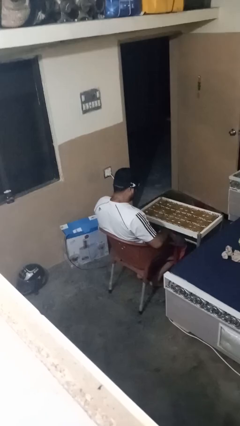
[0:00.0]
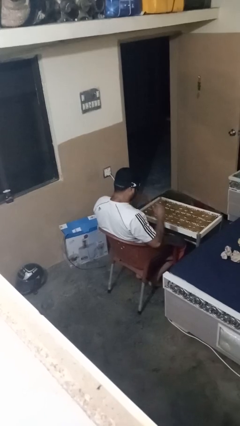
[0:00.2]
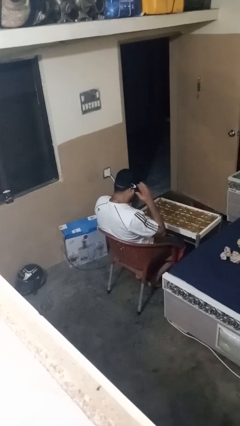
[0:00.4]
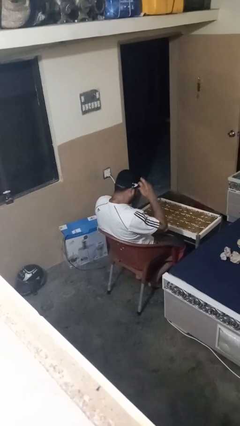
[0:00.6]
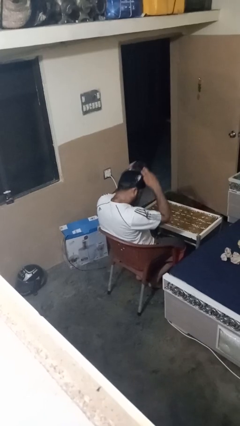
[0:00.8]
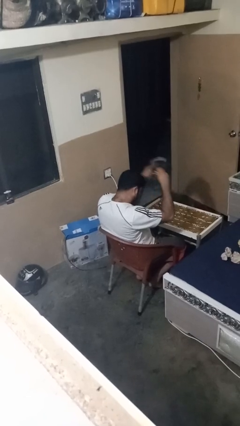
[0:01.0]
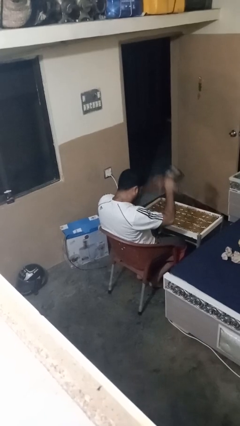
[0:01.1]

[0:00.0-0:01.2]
person takes off sunglasses

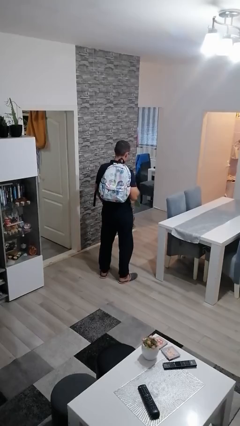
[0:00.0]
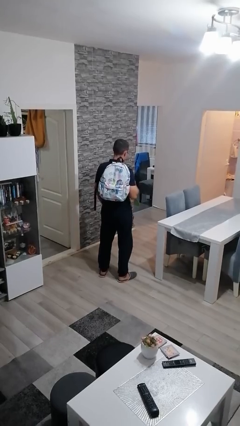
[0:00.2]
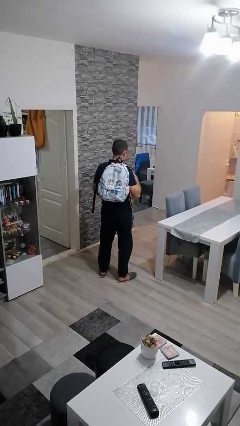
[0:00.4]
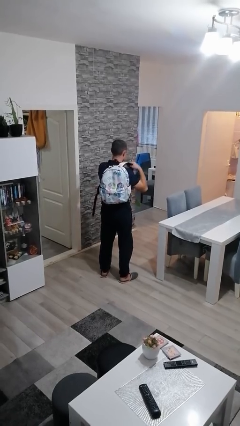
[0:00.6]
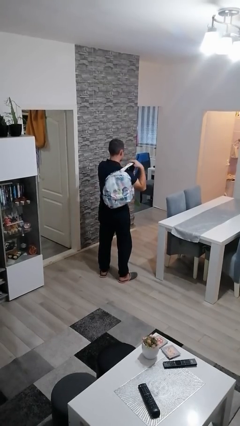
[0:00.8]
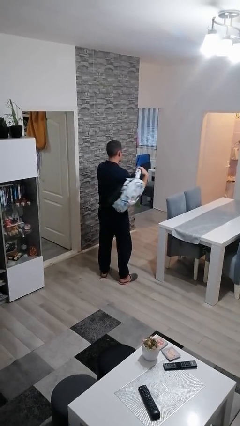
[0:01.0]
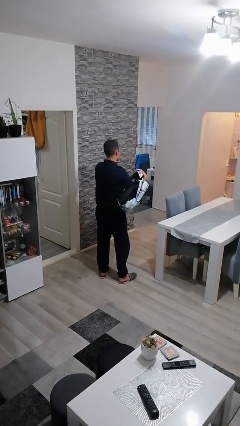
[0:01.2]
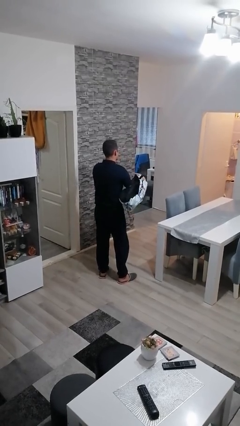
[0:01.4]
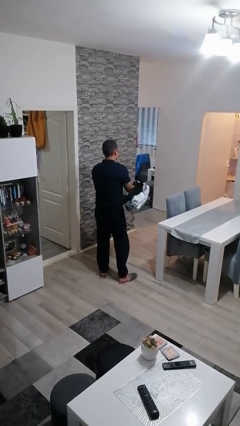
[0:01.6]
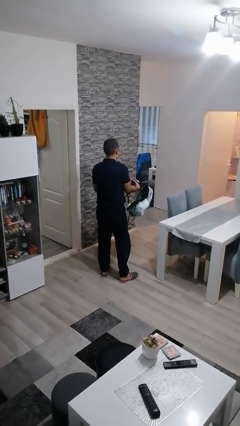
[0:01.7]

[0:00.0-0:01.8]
person takes off backpack

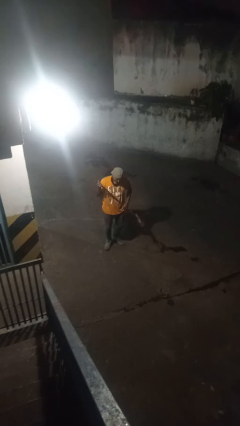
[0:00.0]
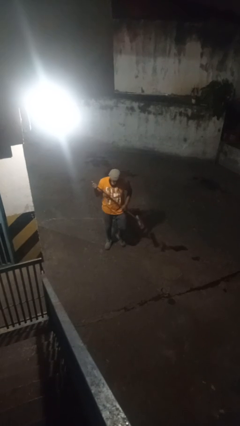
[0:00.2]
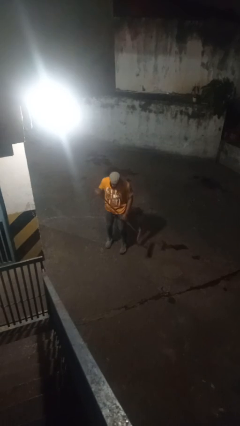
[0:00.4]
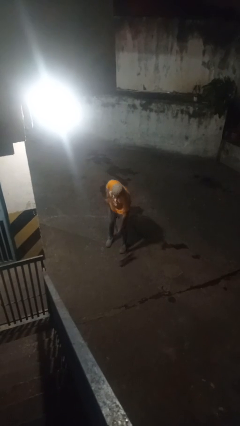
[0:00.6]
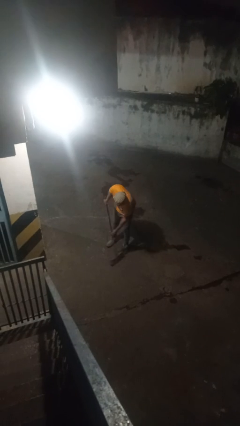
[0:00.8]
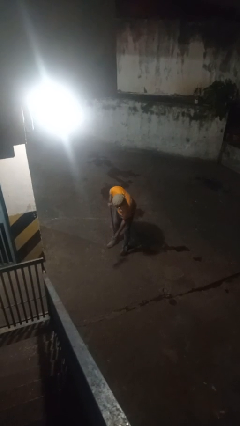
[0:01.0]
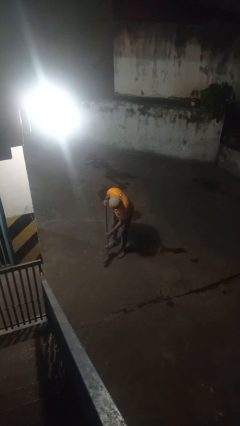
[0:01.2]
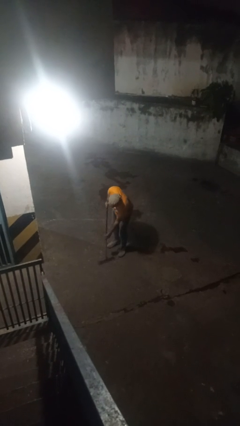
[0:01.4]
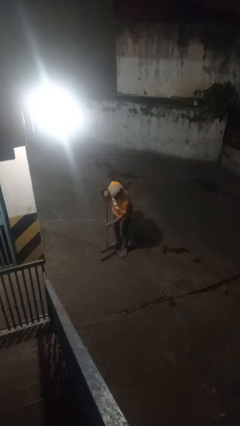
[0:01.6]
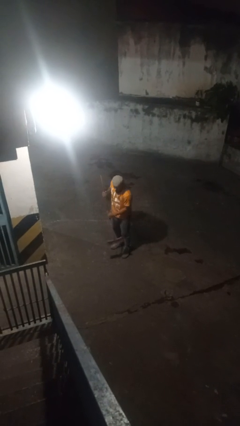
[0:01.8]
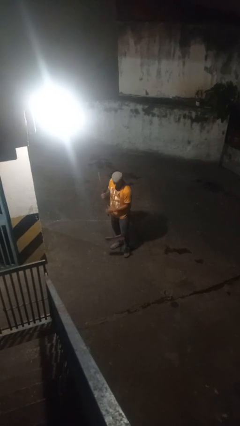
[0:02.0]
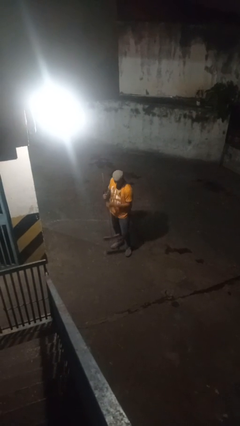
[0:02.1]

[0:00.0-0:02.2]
person sweeps floor

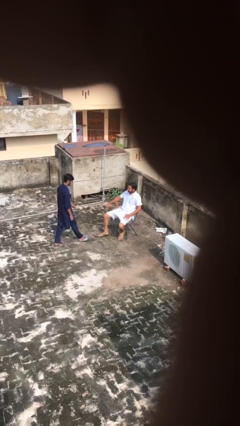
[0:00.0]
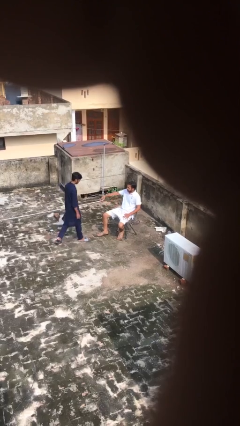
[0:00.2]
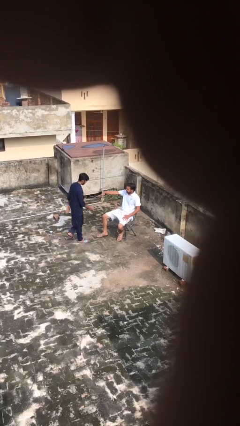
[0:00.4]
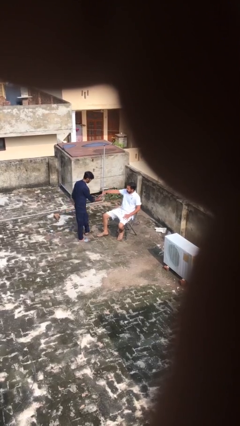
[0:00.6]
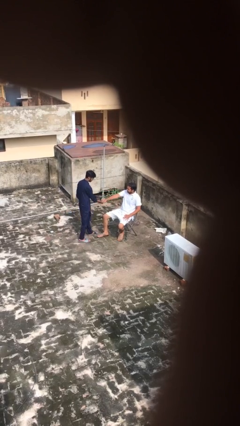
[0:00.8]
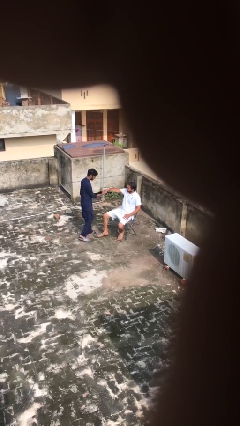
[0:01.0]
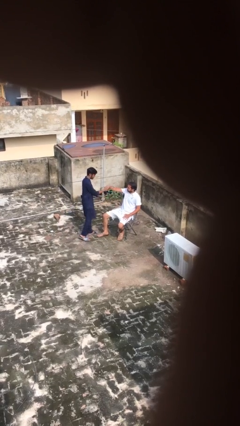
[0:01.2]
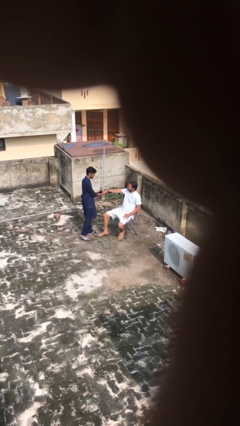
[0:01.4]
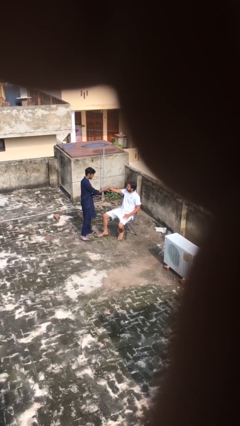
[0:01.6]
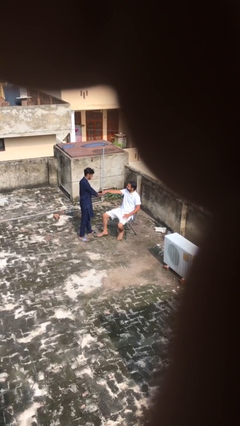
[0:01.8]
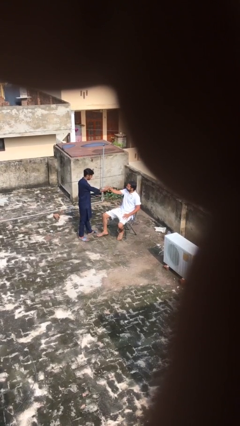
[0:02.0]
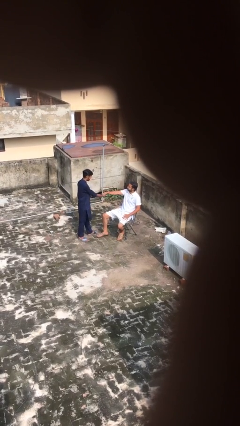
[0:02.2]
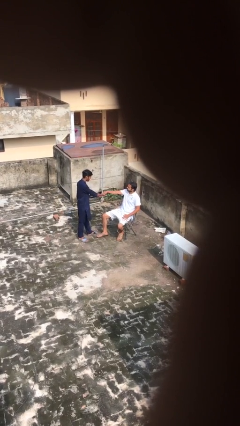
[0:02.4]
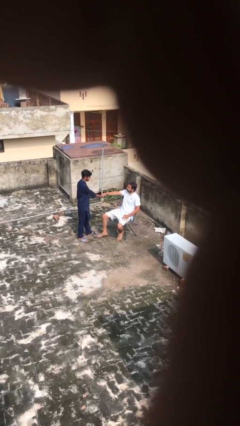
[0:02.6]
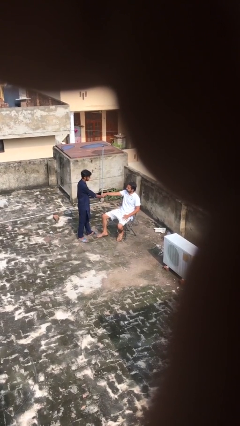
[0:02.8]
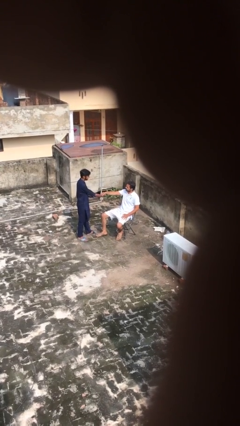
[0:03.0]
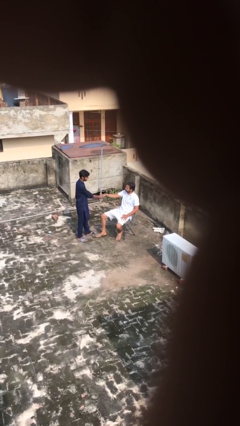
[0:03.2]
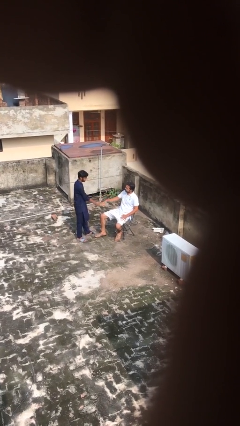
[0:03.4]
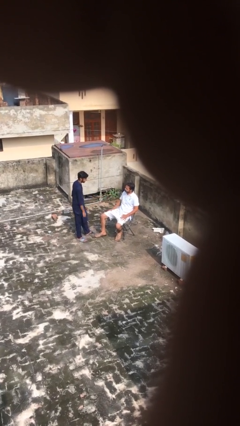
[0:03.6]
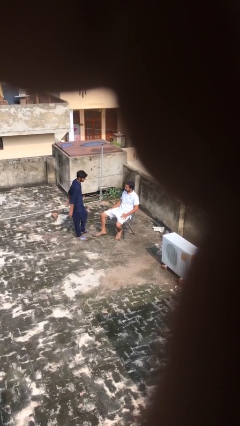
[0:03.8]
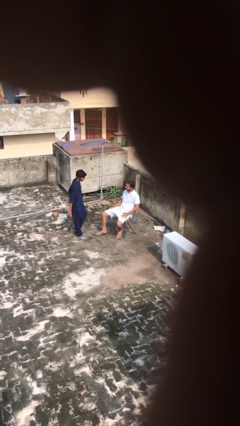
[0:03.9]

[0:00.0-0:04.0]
person shakes hand

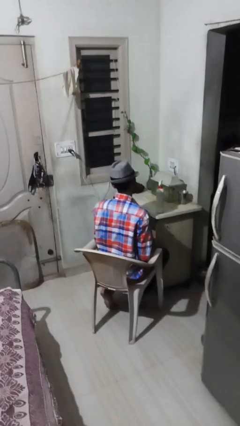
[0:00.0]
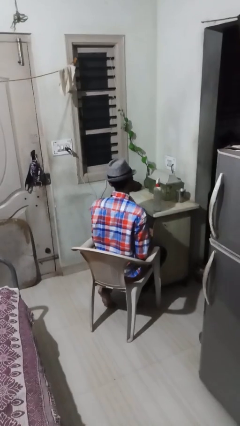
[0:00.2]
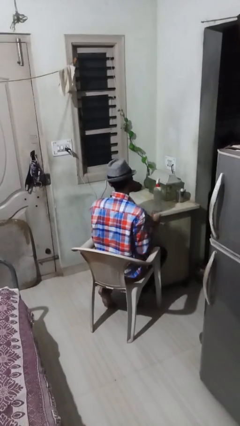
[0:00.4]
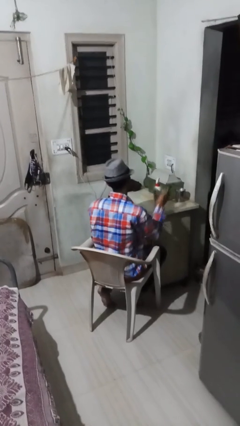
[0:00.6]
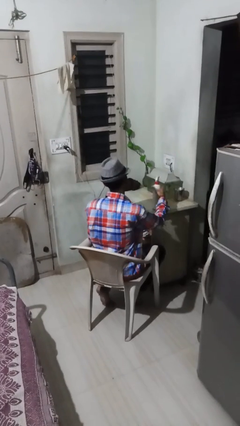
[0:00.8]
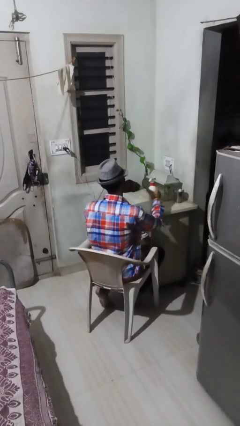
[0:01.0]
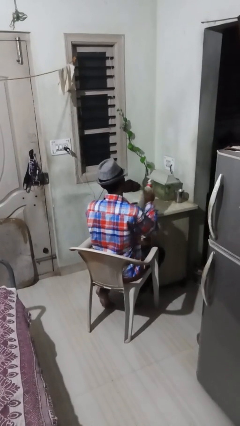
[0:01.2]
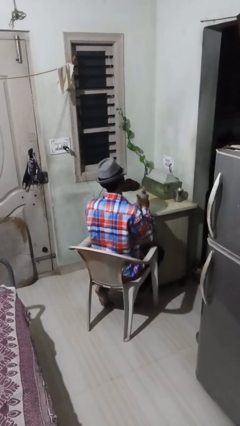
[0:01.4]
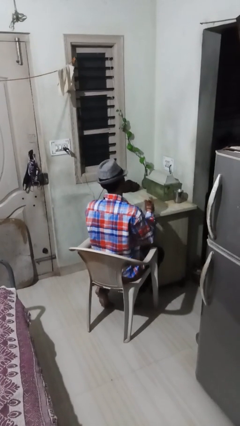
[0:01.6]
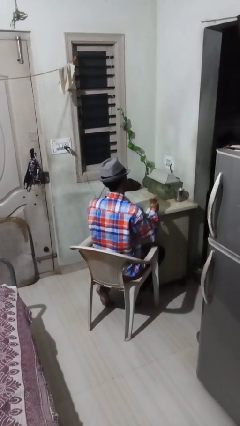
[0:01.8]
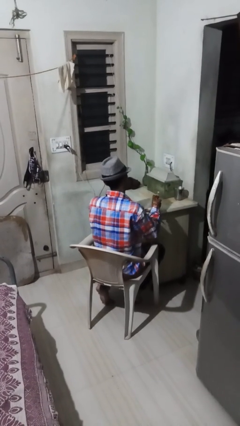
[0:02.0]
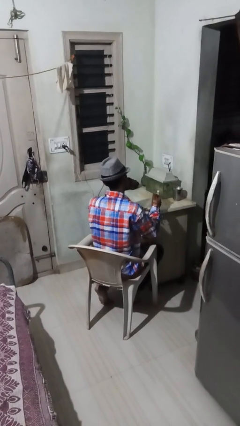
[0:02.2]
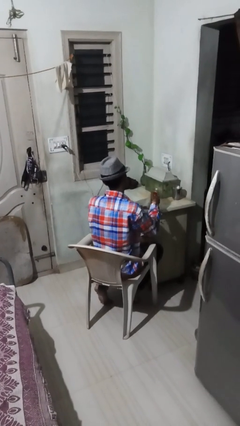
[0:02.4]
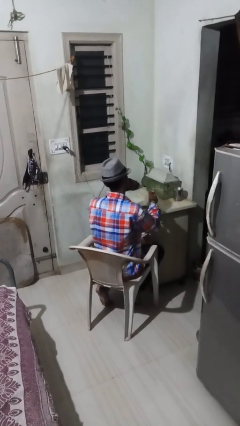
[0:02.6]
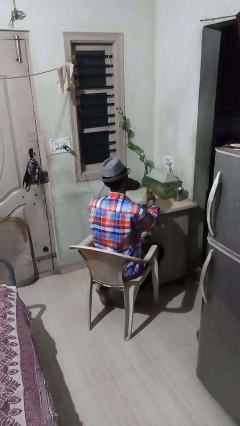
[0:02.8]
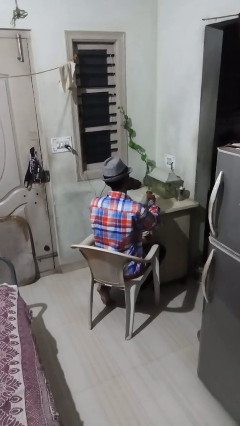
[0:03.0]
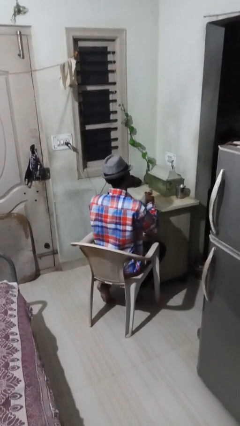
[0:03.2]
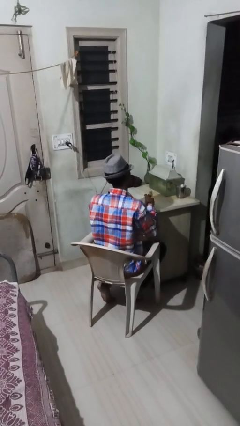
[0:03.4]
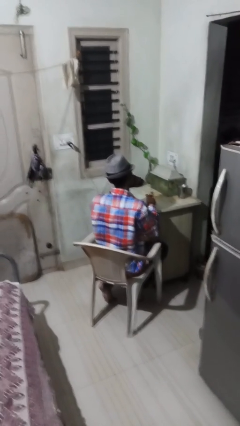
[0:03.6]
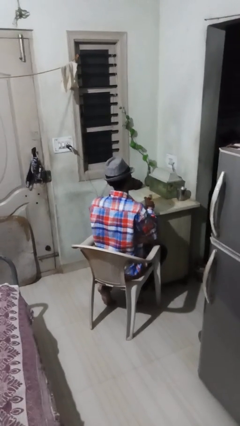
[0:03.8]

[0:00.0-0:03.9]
person sprays from bottle

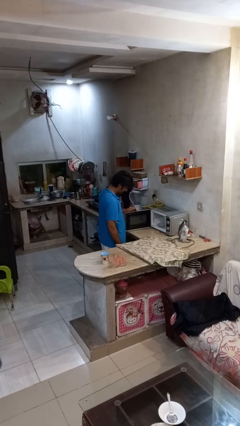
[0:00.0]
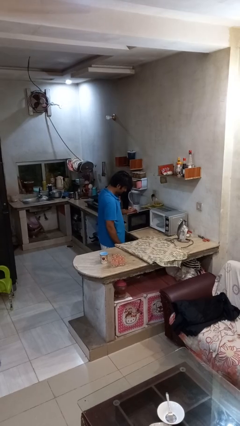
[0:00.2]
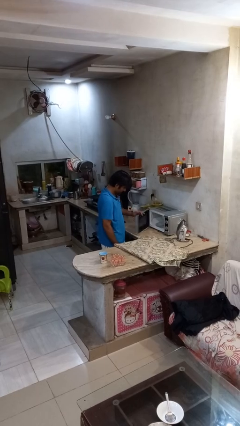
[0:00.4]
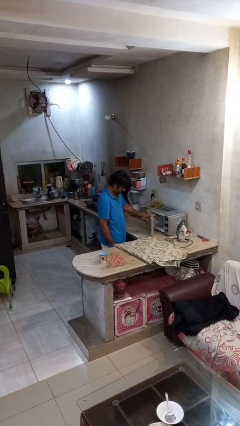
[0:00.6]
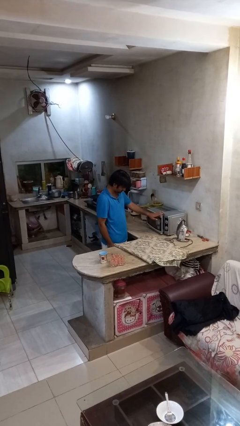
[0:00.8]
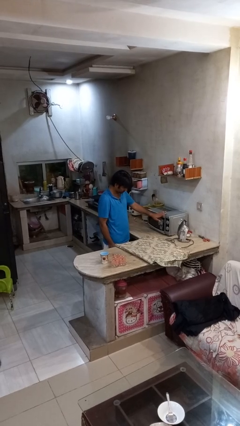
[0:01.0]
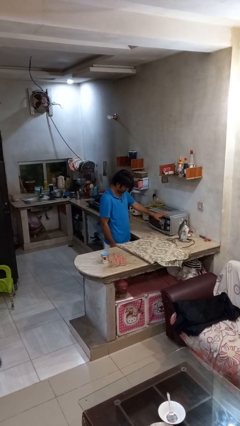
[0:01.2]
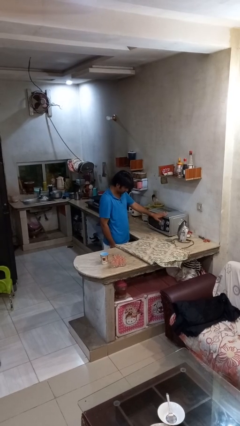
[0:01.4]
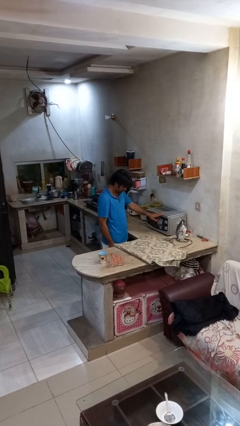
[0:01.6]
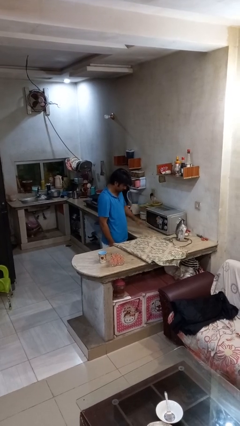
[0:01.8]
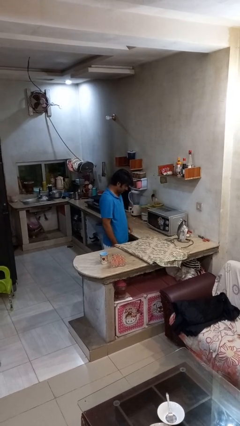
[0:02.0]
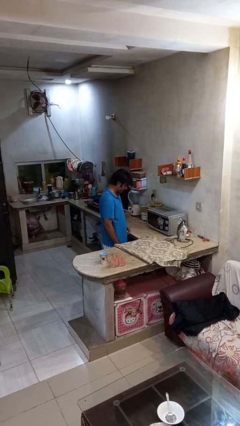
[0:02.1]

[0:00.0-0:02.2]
person closes microwave

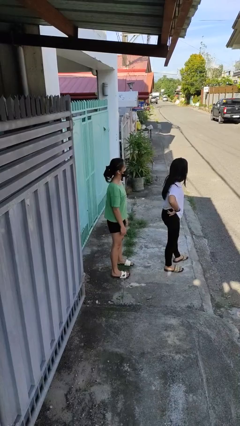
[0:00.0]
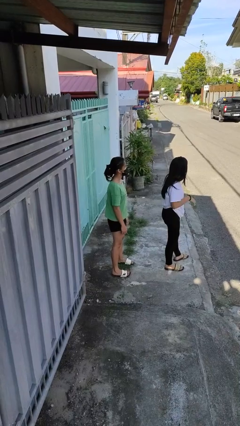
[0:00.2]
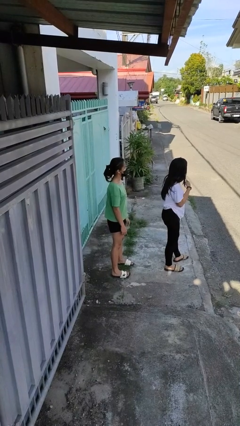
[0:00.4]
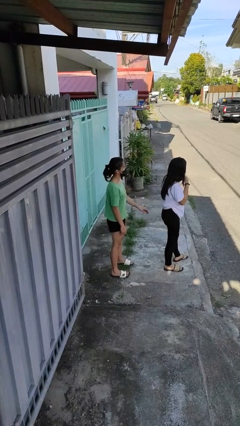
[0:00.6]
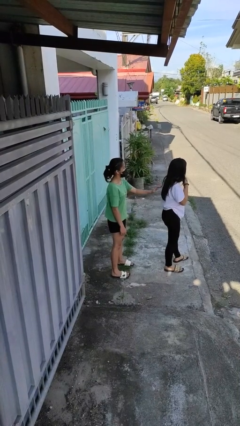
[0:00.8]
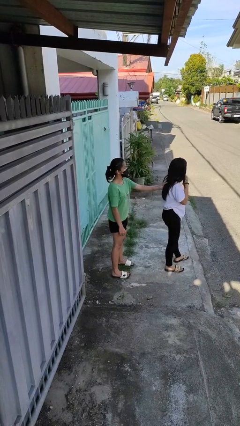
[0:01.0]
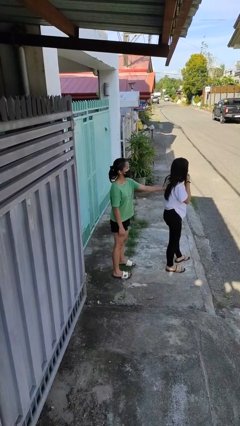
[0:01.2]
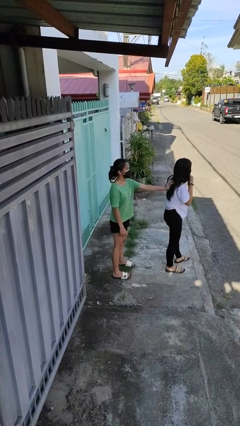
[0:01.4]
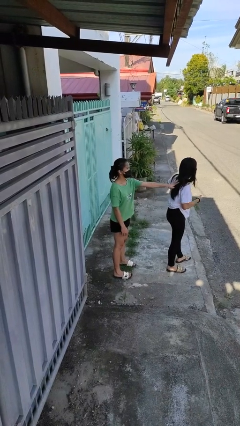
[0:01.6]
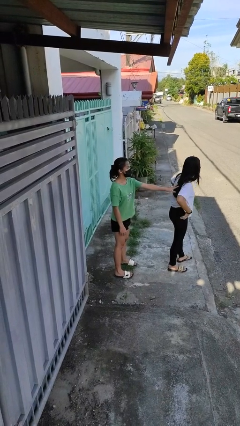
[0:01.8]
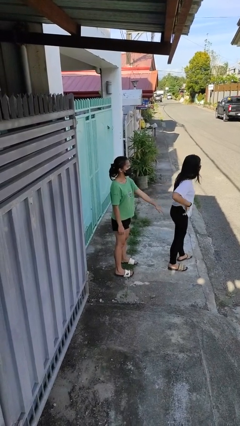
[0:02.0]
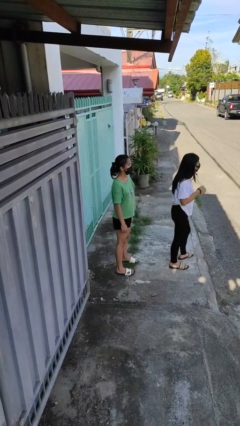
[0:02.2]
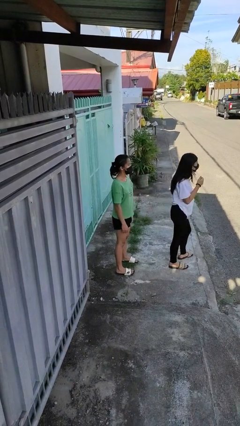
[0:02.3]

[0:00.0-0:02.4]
person touches back of person
